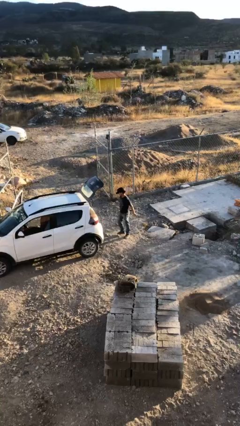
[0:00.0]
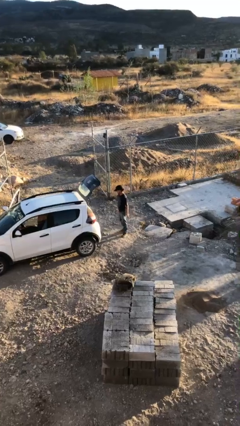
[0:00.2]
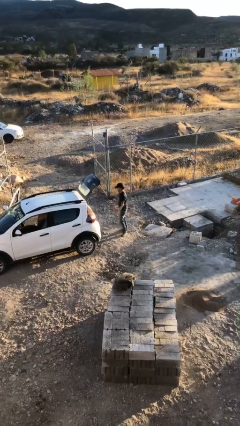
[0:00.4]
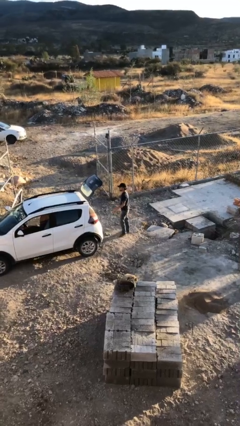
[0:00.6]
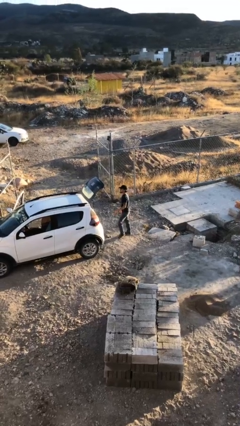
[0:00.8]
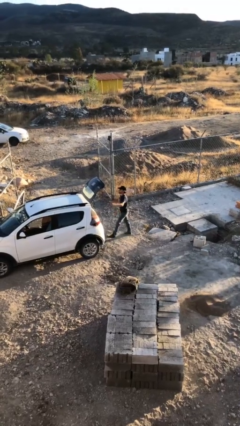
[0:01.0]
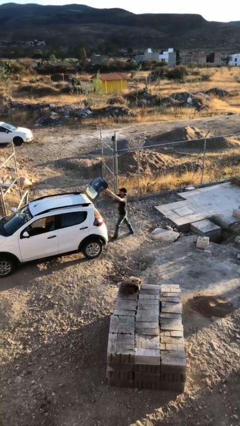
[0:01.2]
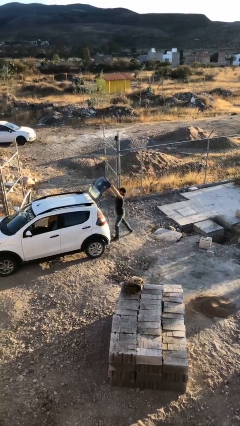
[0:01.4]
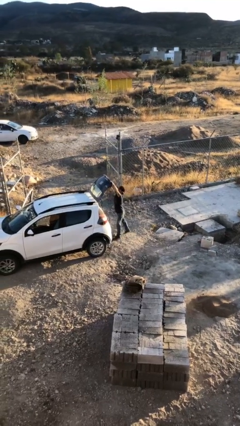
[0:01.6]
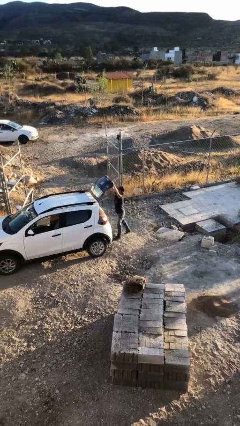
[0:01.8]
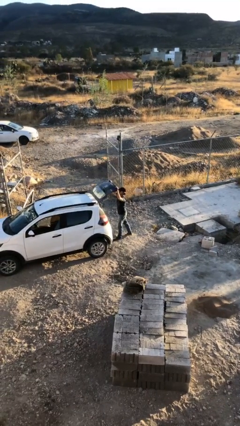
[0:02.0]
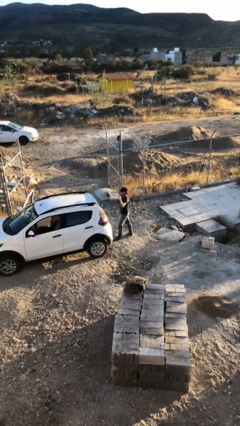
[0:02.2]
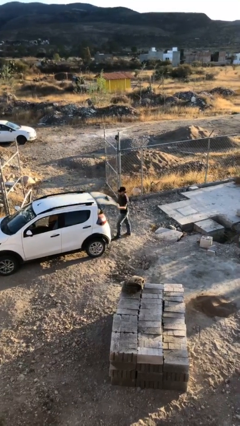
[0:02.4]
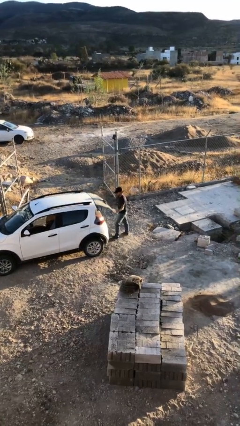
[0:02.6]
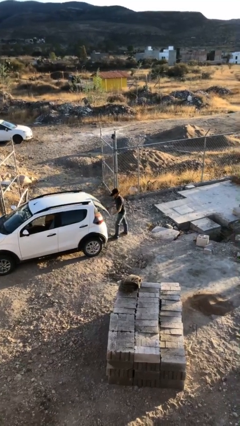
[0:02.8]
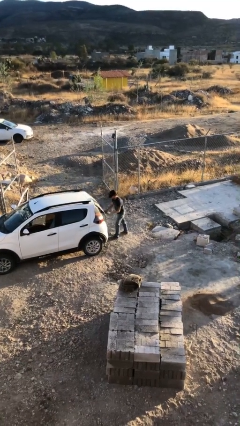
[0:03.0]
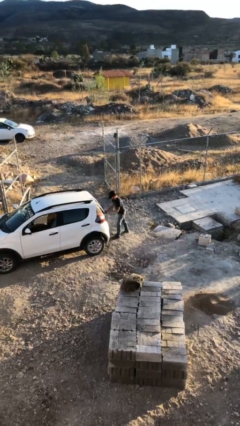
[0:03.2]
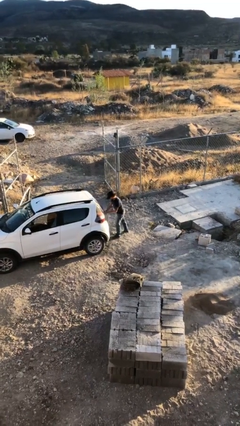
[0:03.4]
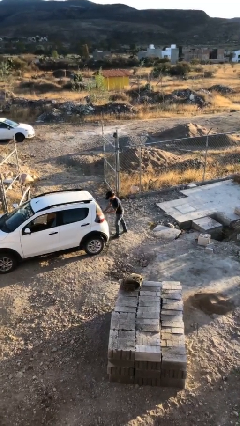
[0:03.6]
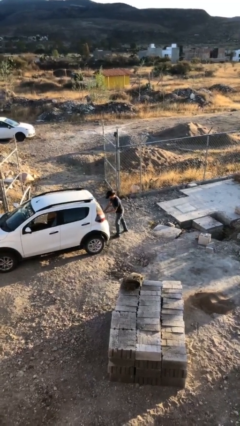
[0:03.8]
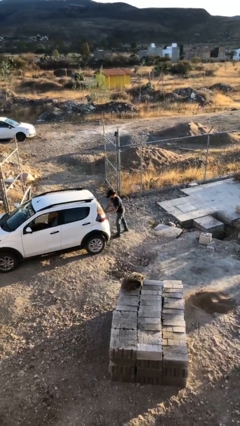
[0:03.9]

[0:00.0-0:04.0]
person closes car trunk

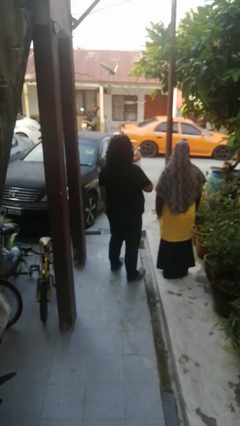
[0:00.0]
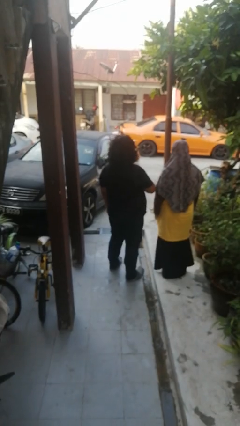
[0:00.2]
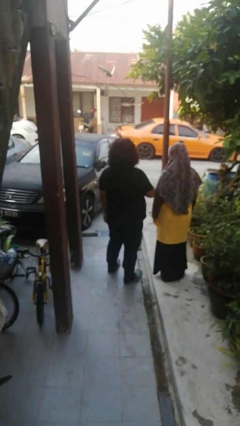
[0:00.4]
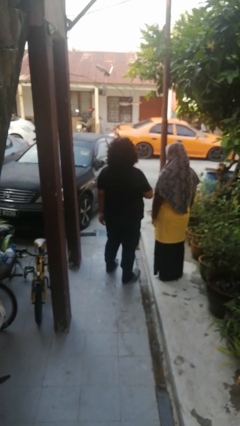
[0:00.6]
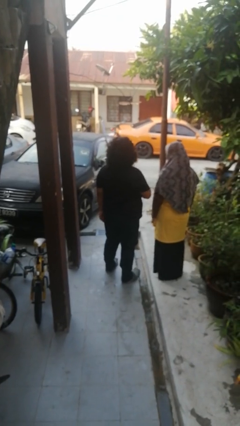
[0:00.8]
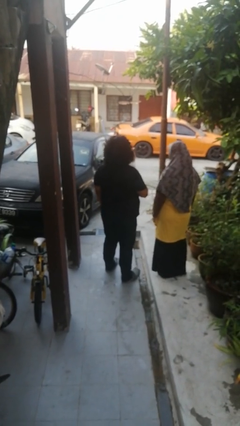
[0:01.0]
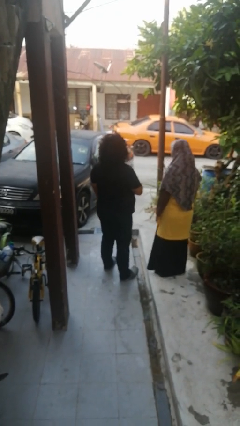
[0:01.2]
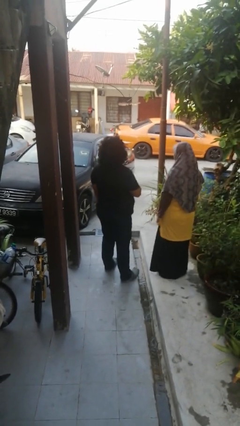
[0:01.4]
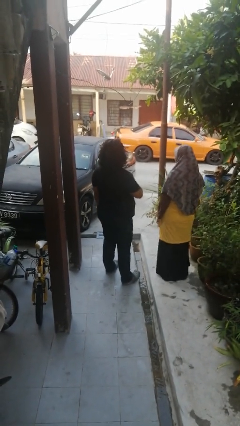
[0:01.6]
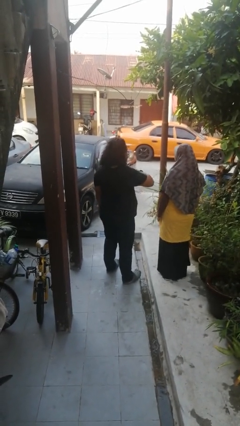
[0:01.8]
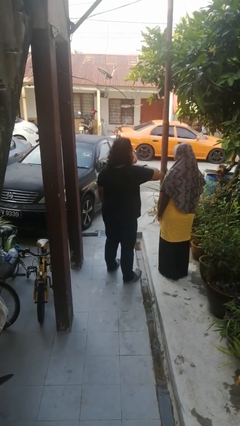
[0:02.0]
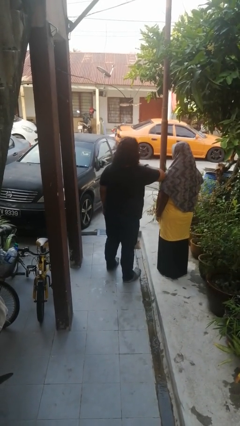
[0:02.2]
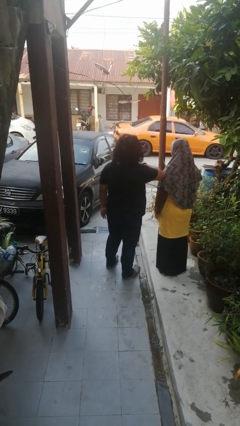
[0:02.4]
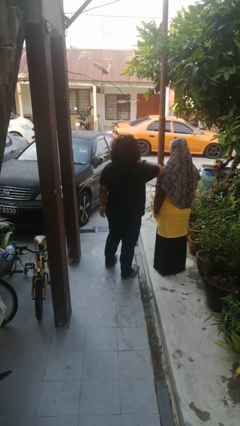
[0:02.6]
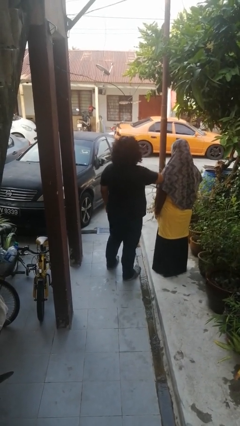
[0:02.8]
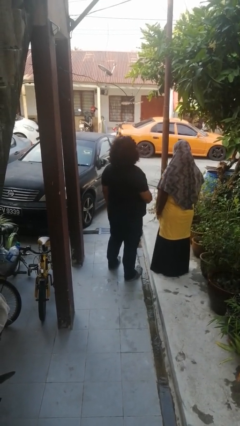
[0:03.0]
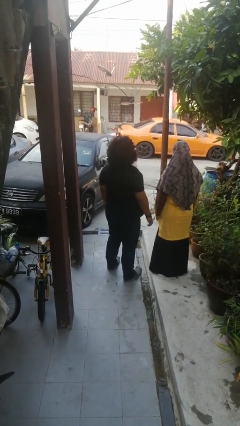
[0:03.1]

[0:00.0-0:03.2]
person nudges person with elbow

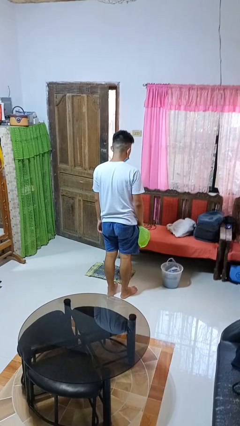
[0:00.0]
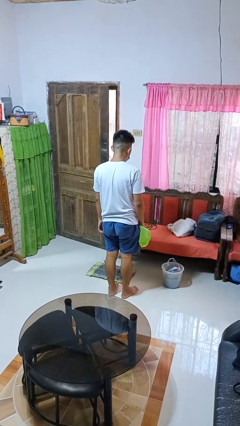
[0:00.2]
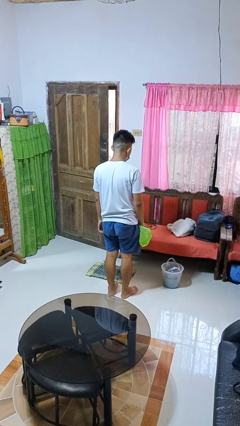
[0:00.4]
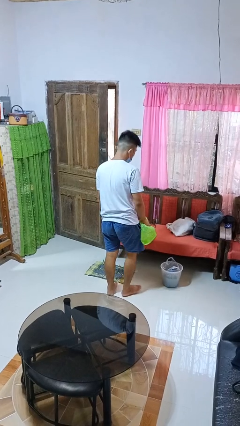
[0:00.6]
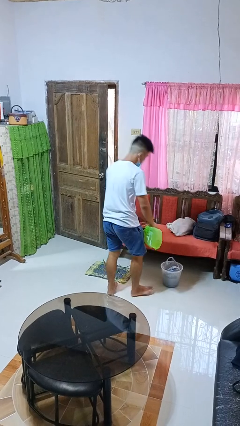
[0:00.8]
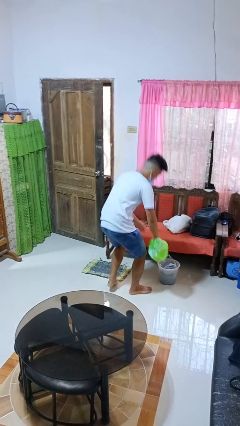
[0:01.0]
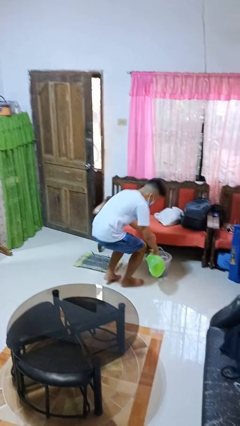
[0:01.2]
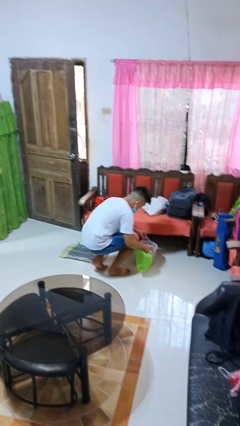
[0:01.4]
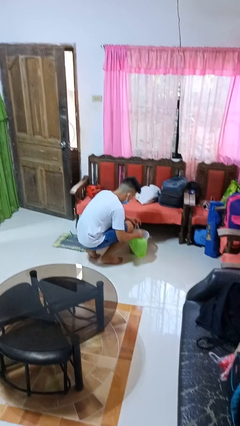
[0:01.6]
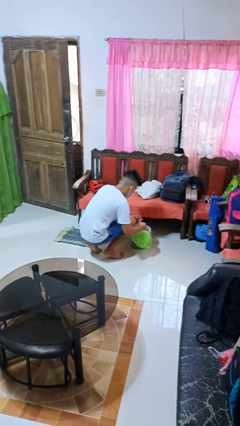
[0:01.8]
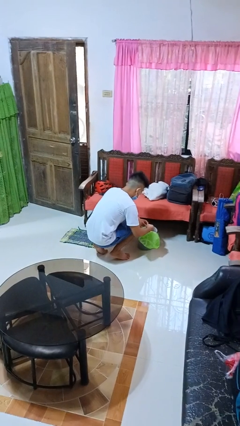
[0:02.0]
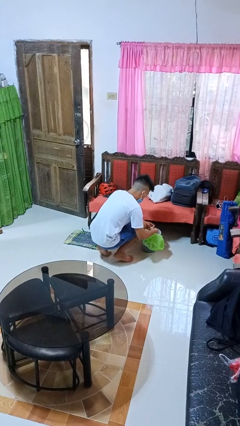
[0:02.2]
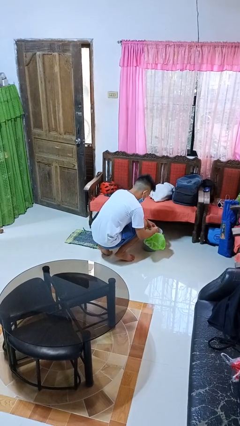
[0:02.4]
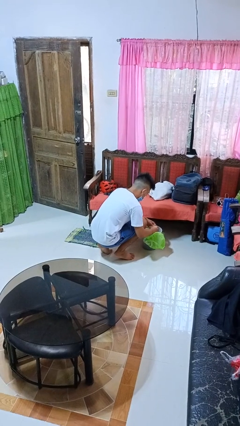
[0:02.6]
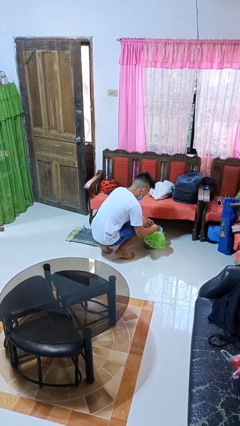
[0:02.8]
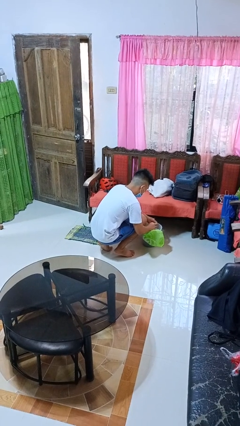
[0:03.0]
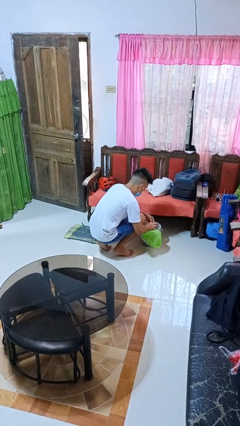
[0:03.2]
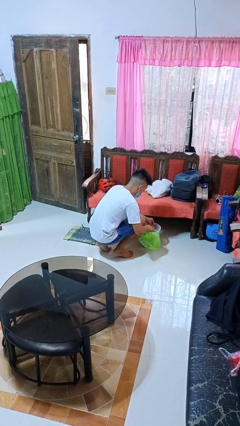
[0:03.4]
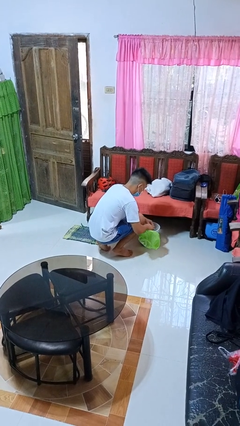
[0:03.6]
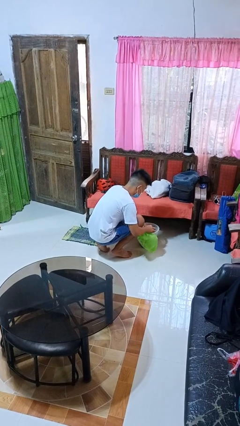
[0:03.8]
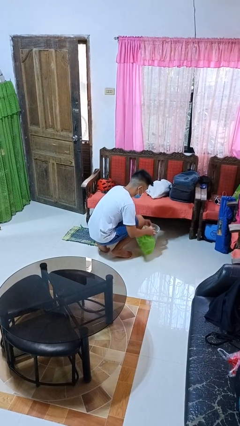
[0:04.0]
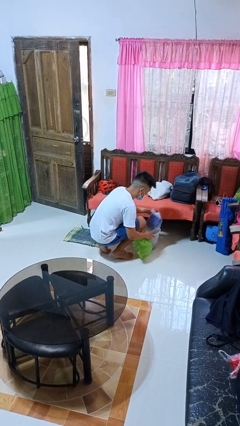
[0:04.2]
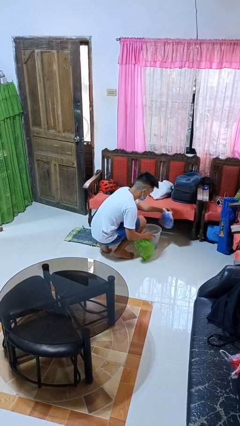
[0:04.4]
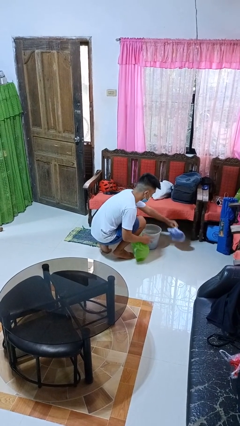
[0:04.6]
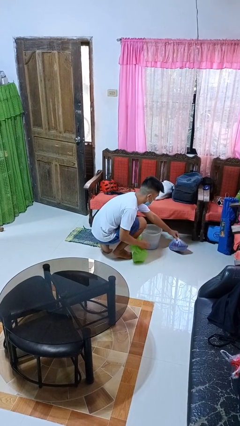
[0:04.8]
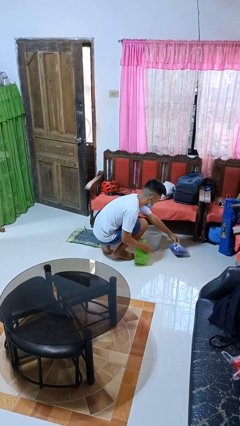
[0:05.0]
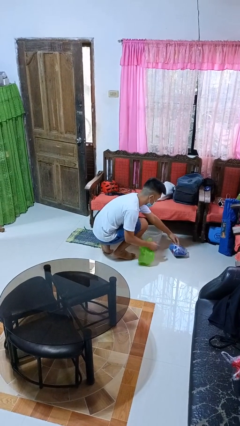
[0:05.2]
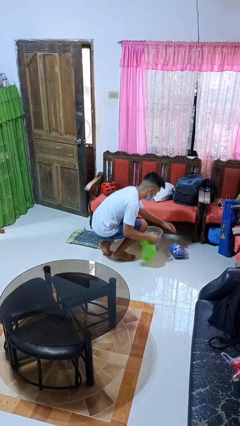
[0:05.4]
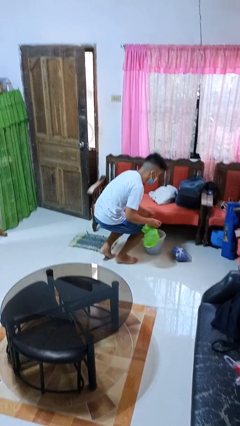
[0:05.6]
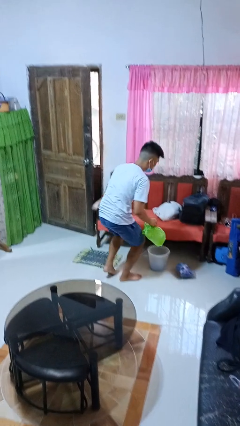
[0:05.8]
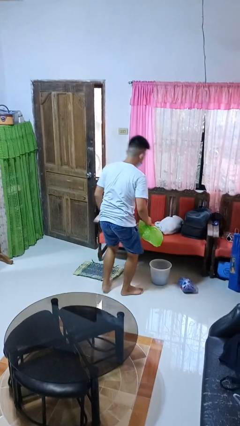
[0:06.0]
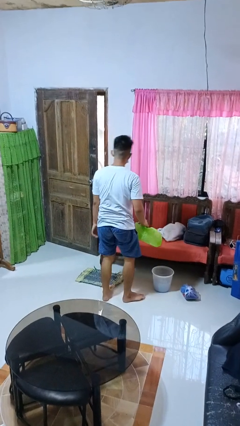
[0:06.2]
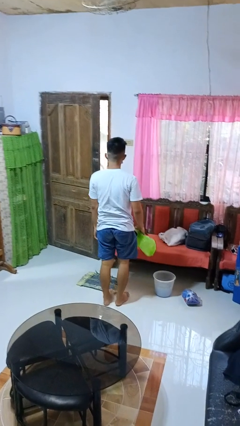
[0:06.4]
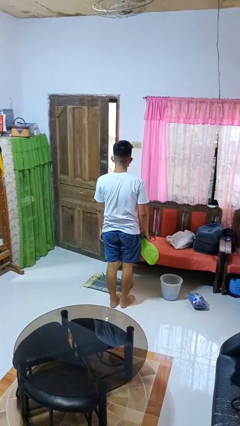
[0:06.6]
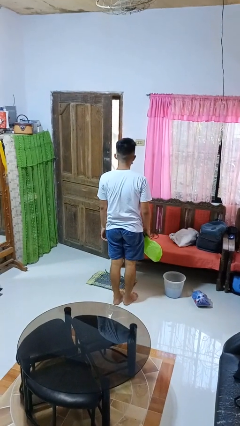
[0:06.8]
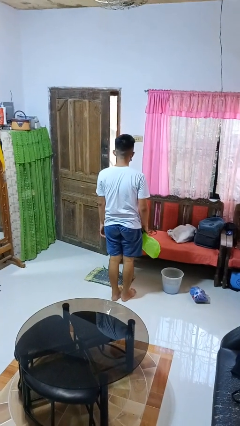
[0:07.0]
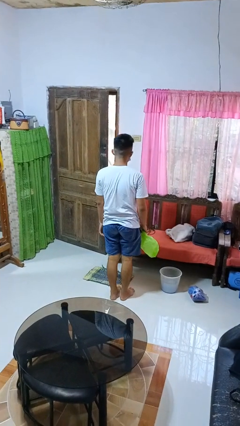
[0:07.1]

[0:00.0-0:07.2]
person removes trashbag from trashcan

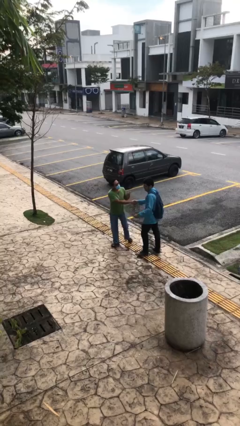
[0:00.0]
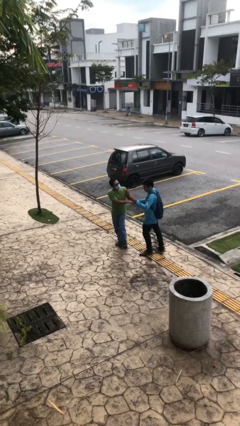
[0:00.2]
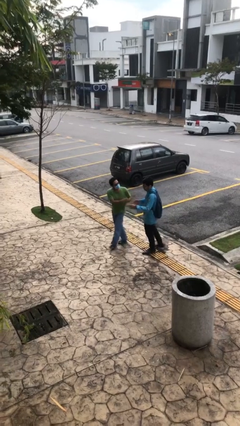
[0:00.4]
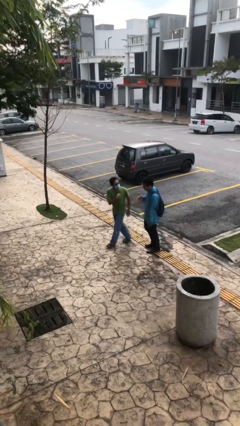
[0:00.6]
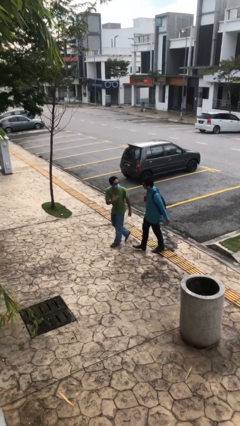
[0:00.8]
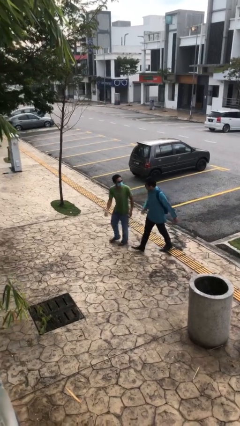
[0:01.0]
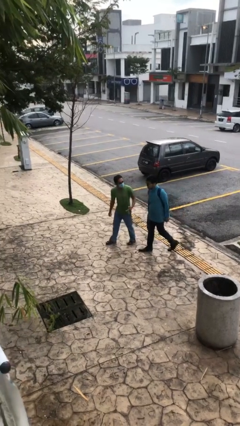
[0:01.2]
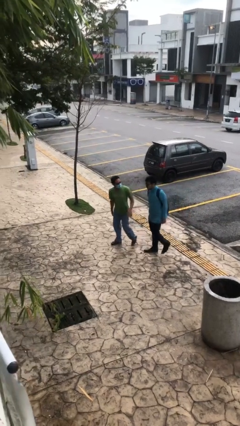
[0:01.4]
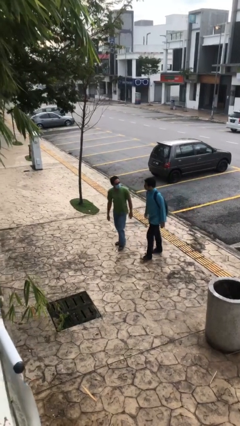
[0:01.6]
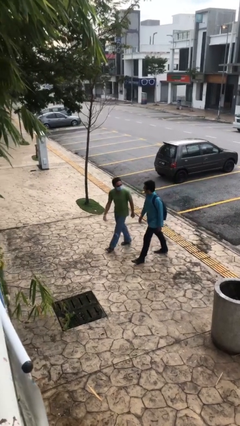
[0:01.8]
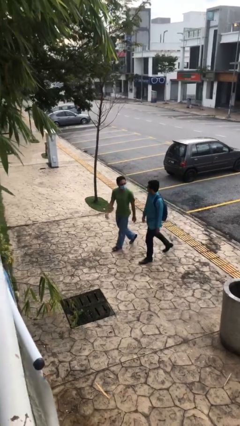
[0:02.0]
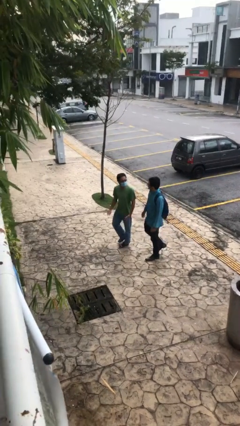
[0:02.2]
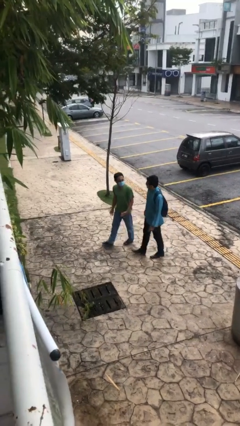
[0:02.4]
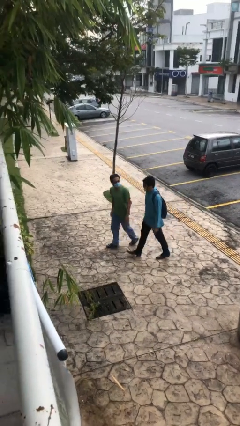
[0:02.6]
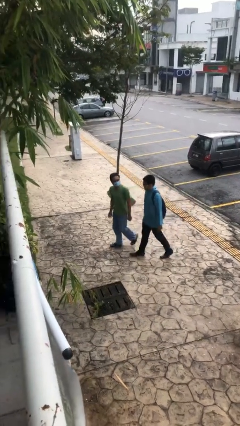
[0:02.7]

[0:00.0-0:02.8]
person talks to person

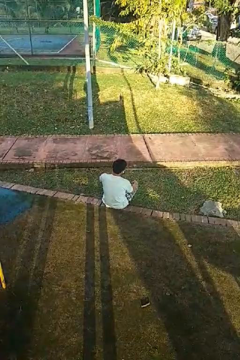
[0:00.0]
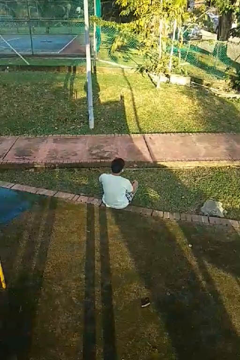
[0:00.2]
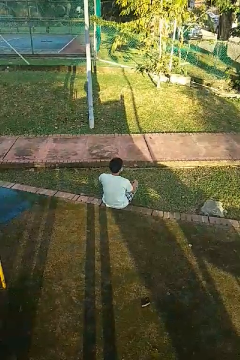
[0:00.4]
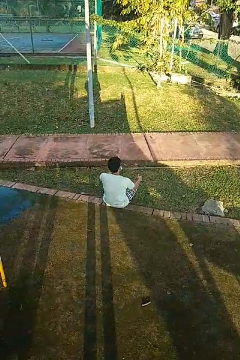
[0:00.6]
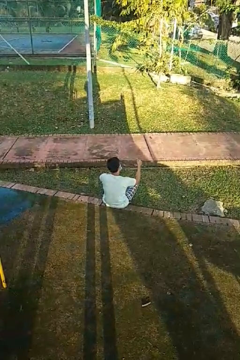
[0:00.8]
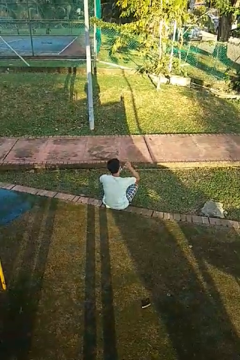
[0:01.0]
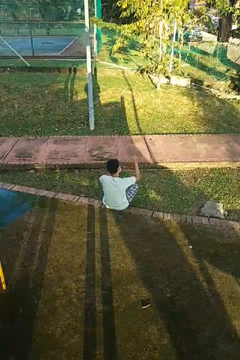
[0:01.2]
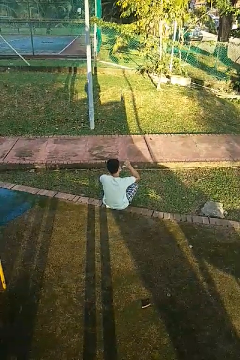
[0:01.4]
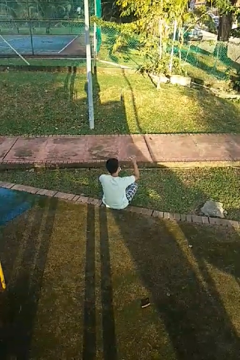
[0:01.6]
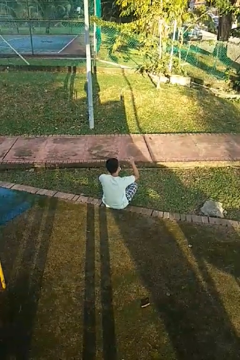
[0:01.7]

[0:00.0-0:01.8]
person gestures behind me
